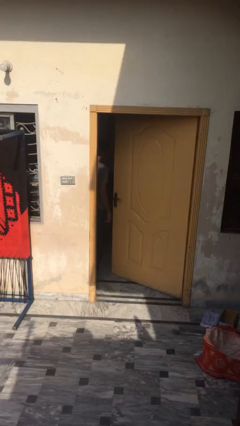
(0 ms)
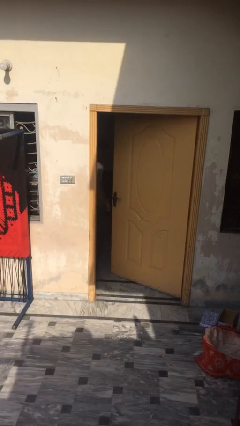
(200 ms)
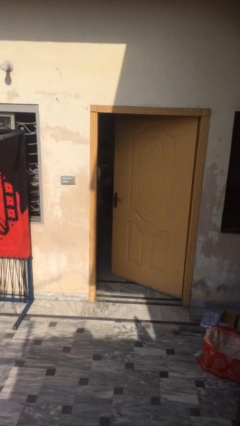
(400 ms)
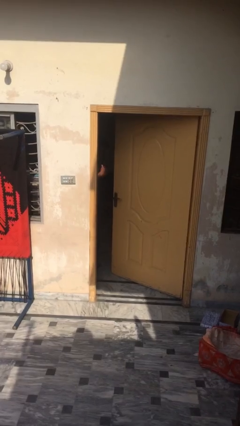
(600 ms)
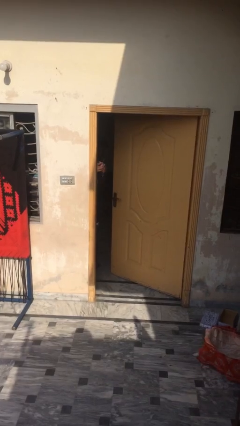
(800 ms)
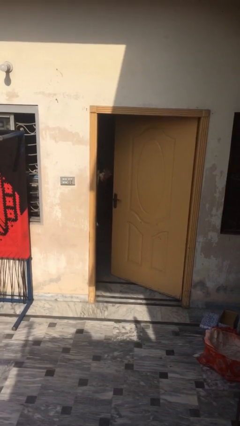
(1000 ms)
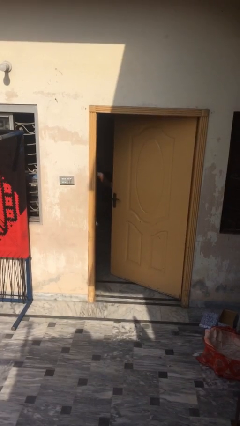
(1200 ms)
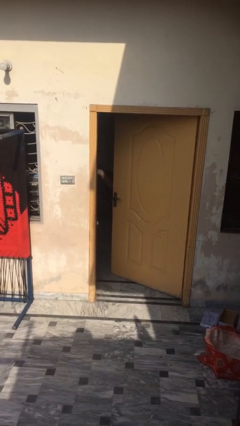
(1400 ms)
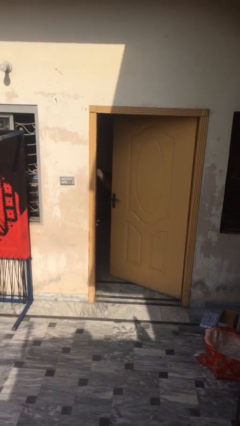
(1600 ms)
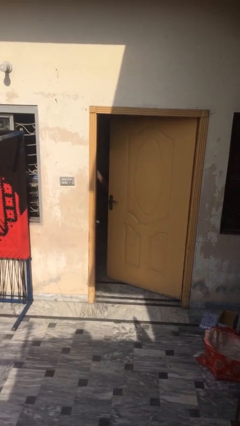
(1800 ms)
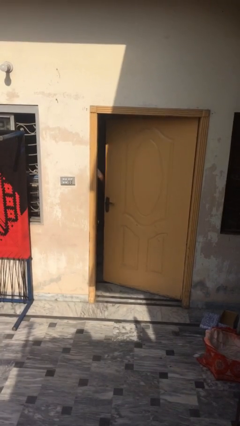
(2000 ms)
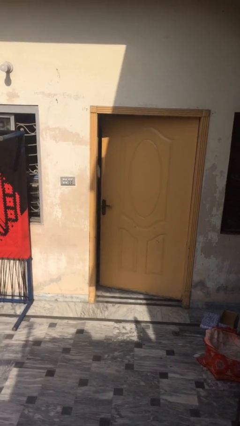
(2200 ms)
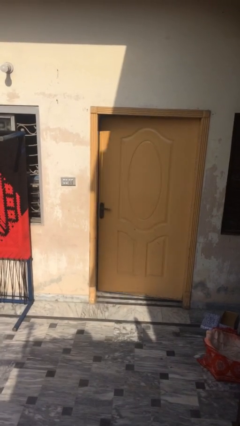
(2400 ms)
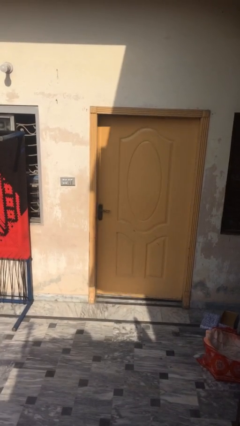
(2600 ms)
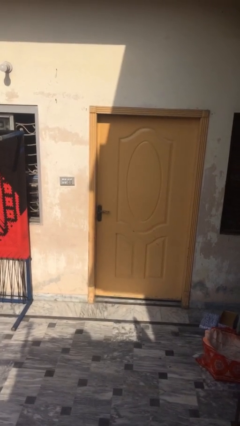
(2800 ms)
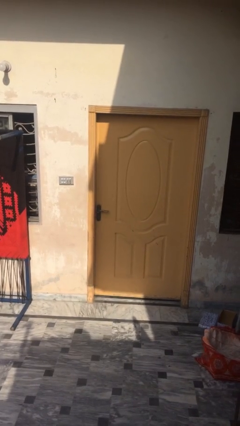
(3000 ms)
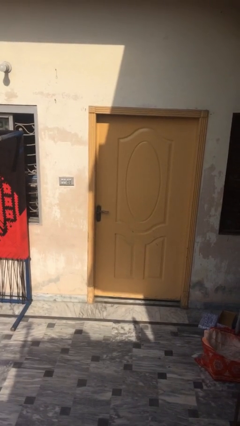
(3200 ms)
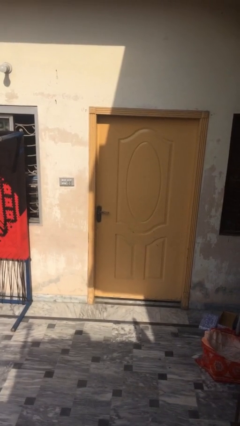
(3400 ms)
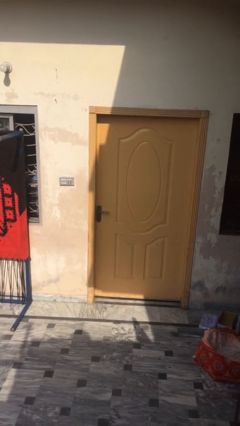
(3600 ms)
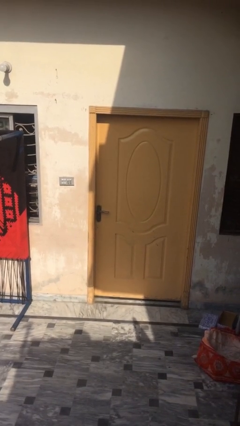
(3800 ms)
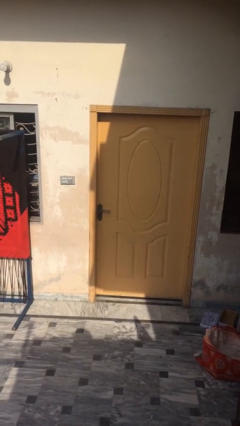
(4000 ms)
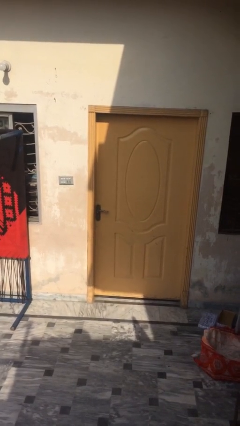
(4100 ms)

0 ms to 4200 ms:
person closes facility door

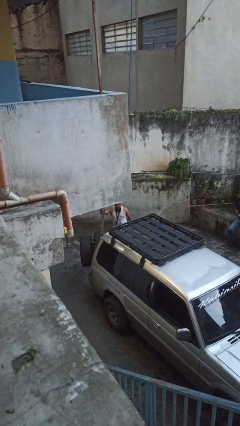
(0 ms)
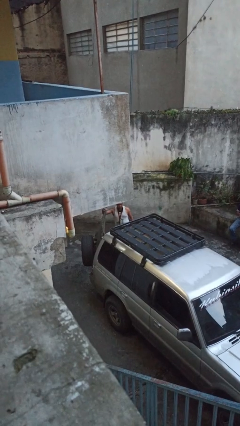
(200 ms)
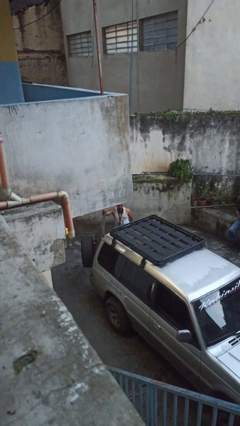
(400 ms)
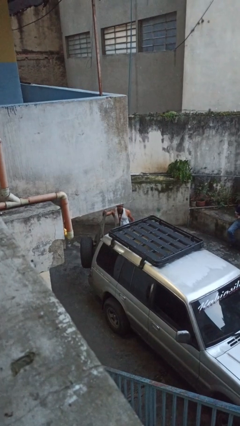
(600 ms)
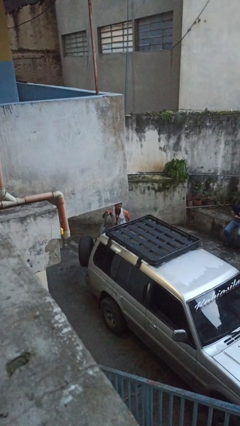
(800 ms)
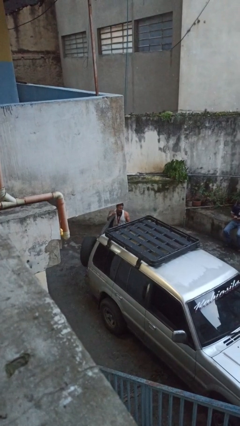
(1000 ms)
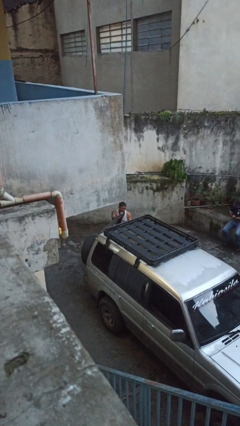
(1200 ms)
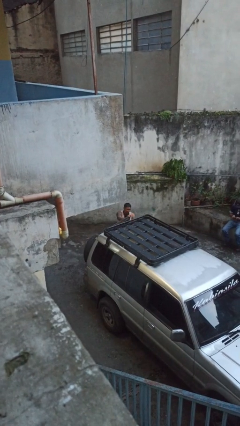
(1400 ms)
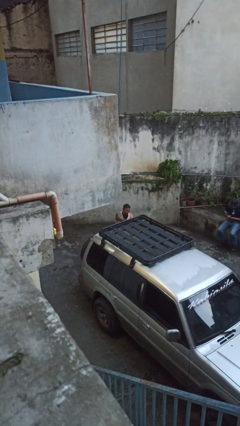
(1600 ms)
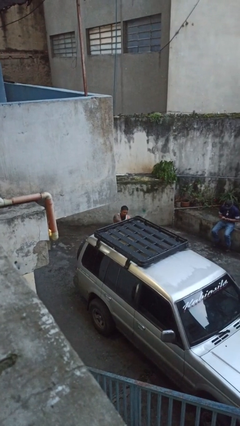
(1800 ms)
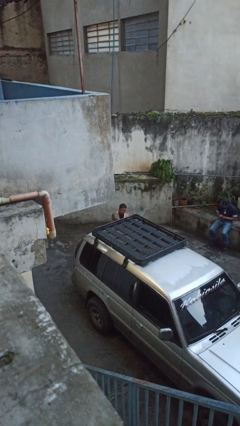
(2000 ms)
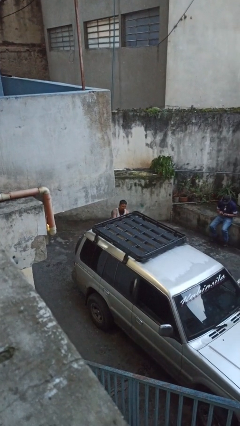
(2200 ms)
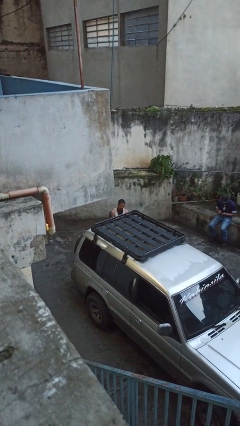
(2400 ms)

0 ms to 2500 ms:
person closes car trunk

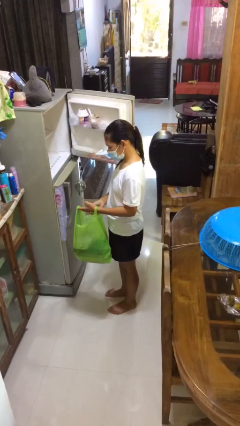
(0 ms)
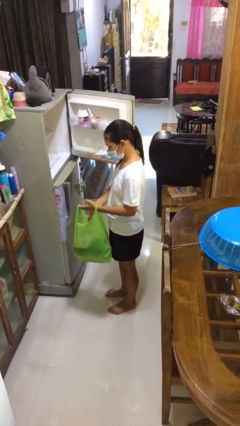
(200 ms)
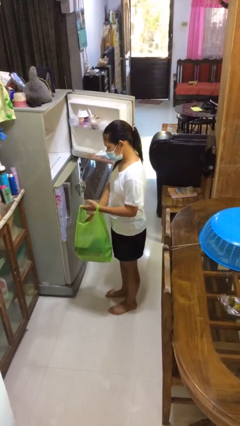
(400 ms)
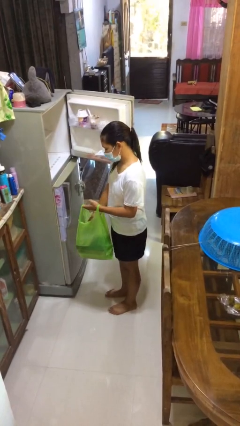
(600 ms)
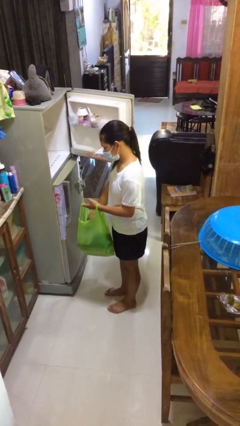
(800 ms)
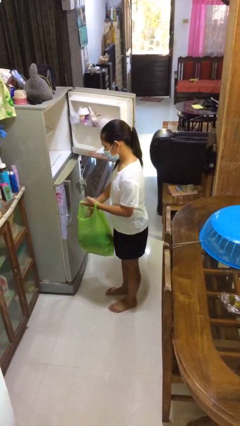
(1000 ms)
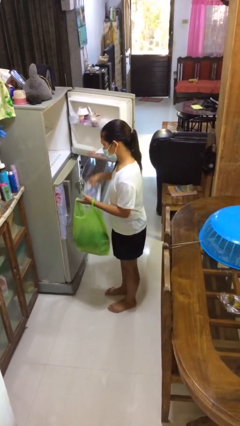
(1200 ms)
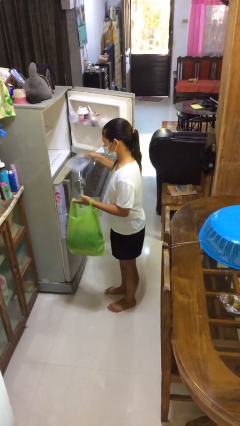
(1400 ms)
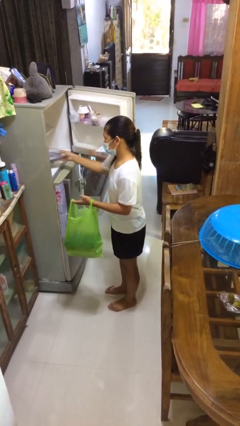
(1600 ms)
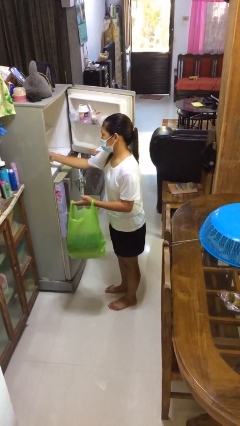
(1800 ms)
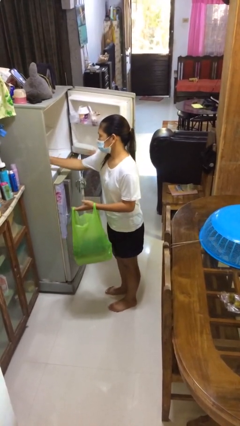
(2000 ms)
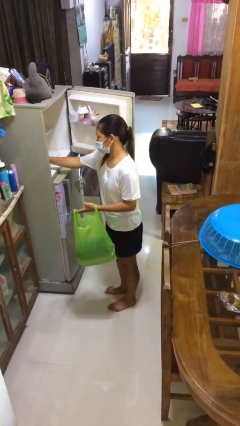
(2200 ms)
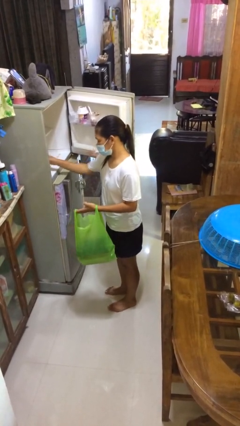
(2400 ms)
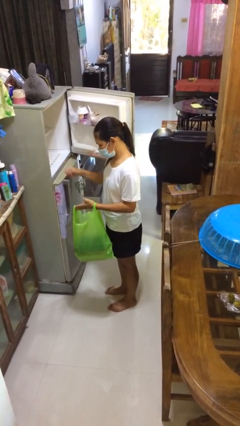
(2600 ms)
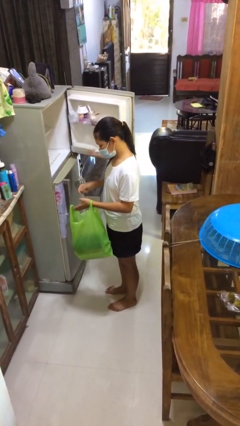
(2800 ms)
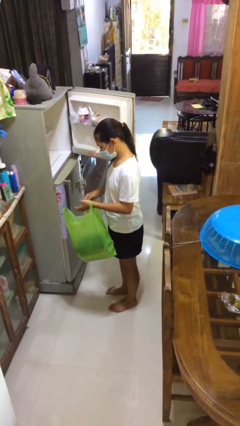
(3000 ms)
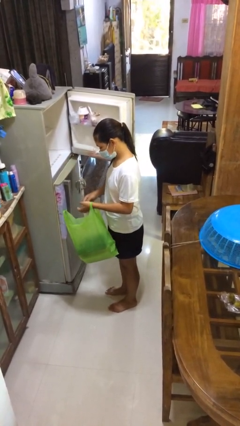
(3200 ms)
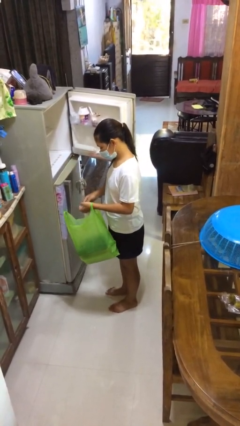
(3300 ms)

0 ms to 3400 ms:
person loads groceries into refrigerator

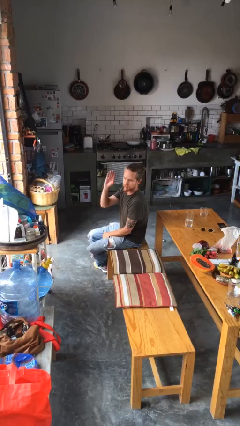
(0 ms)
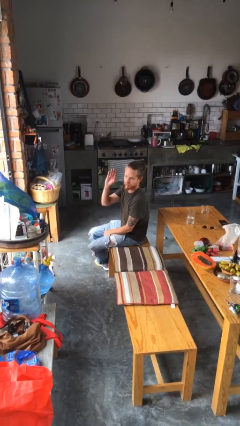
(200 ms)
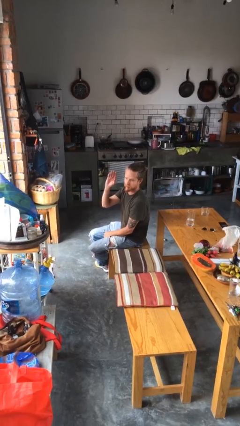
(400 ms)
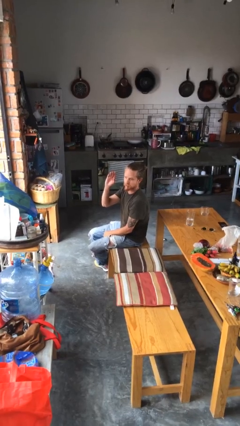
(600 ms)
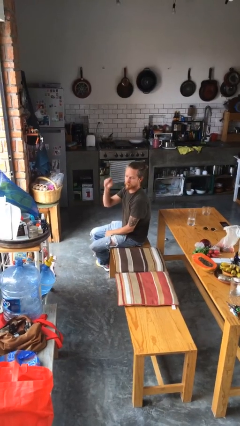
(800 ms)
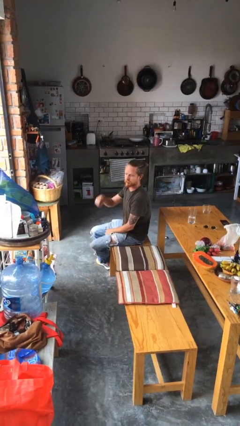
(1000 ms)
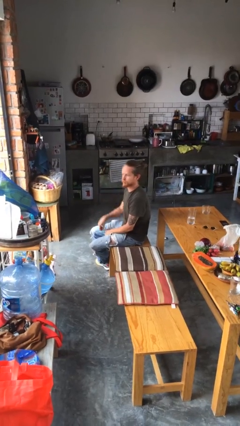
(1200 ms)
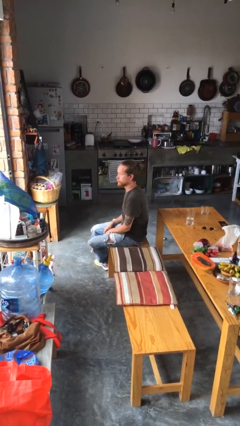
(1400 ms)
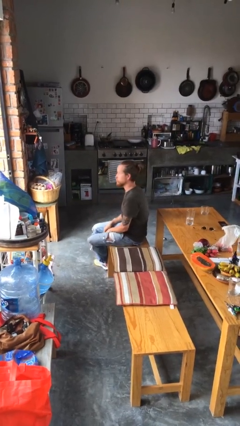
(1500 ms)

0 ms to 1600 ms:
person gestures lower hand

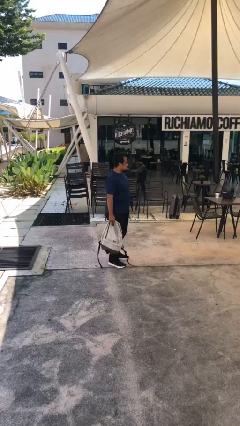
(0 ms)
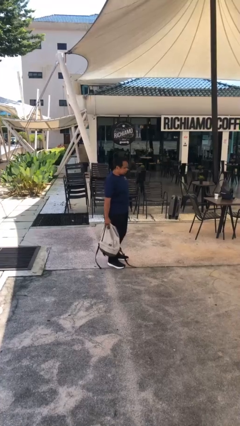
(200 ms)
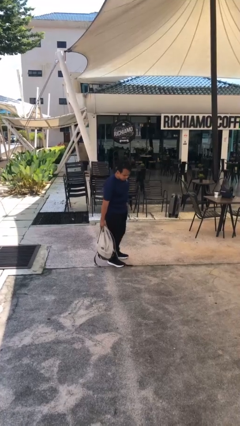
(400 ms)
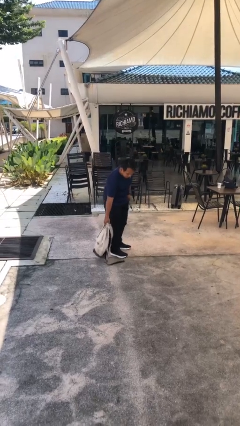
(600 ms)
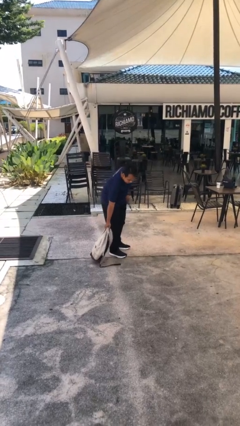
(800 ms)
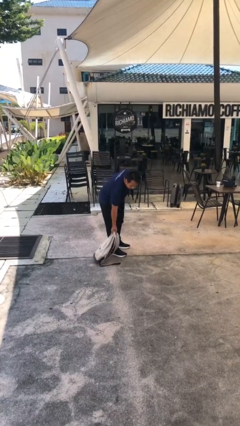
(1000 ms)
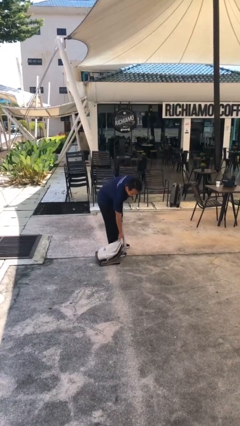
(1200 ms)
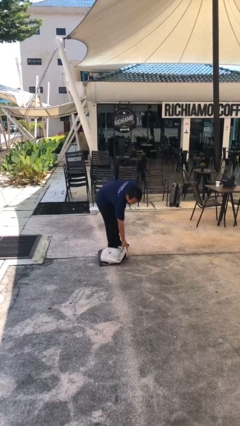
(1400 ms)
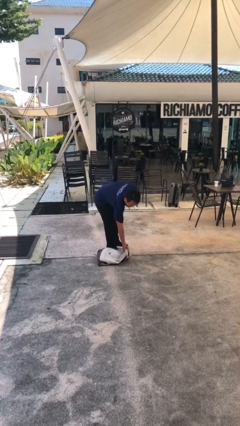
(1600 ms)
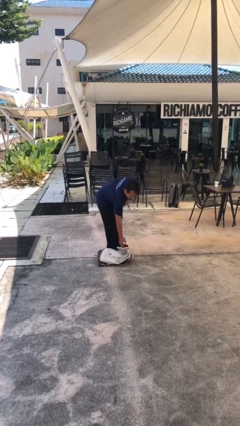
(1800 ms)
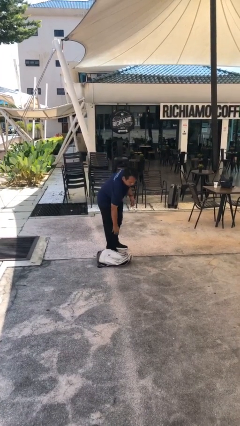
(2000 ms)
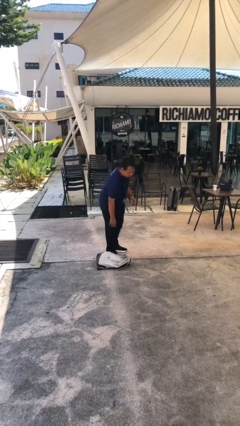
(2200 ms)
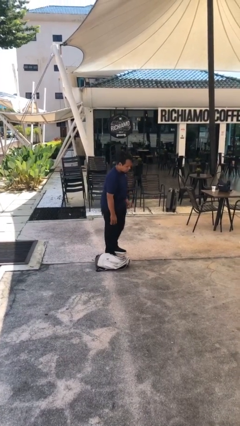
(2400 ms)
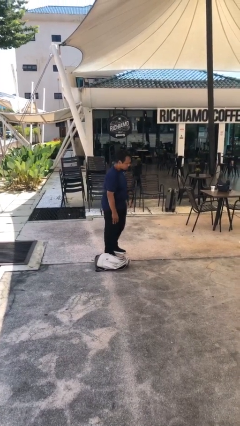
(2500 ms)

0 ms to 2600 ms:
person puts down object on floor

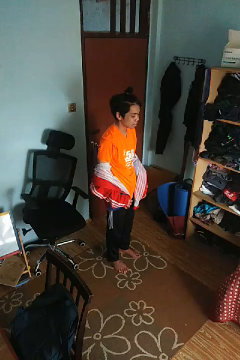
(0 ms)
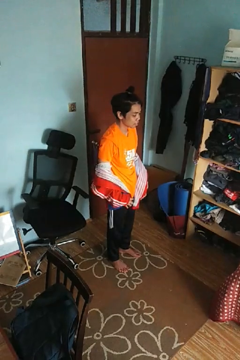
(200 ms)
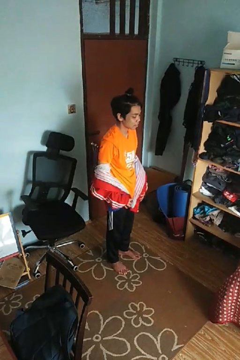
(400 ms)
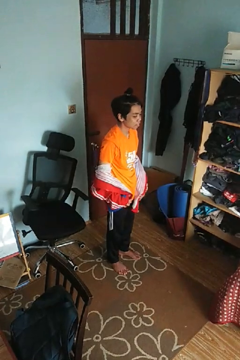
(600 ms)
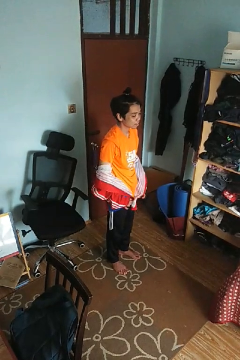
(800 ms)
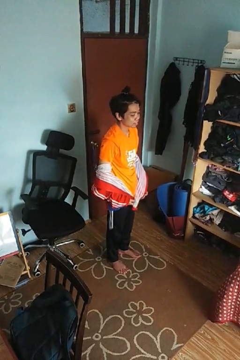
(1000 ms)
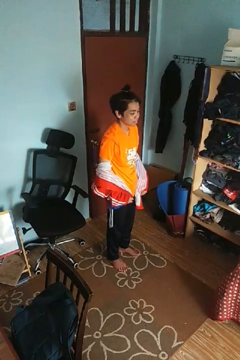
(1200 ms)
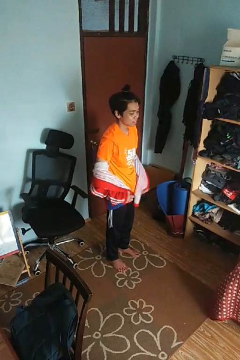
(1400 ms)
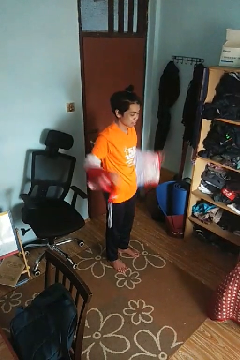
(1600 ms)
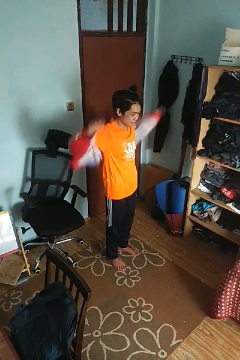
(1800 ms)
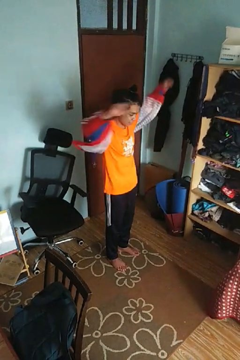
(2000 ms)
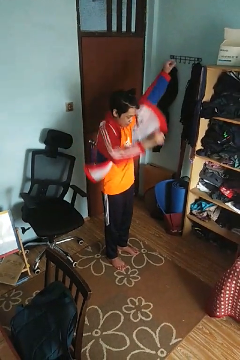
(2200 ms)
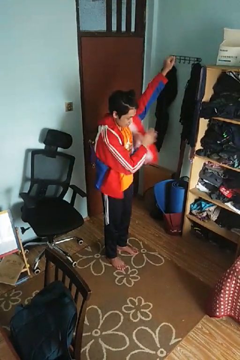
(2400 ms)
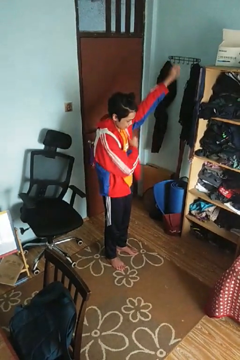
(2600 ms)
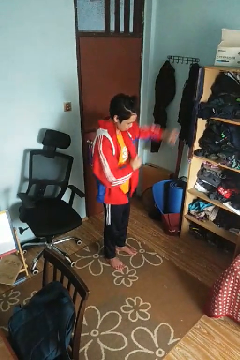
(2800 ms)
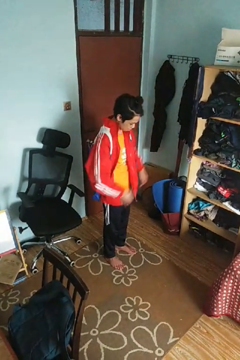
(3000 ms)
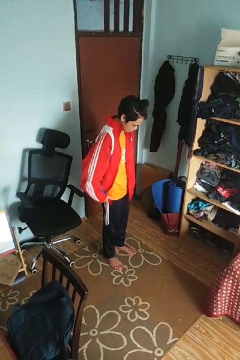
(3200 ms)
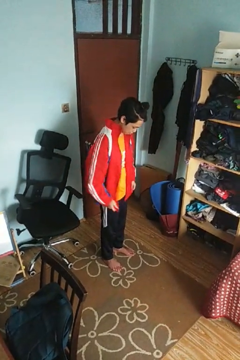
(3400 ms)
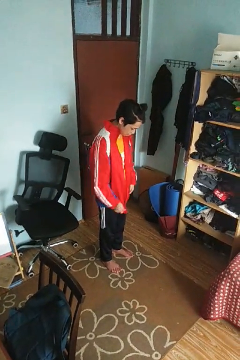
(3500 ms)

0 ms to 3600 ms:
person puts on jacket

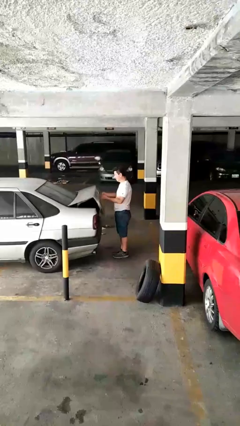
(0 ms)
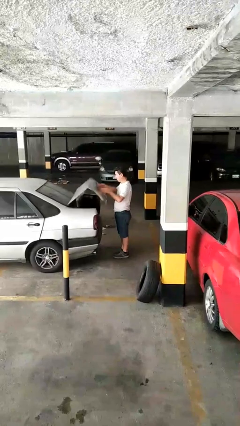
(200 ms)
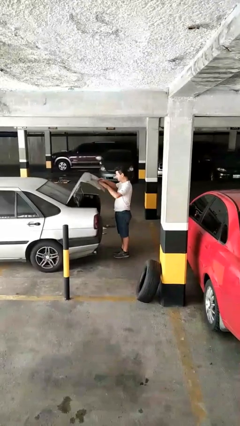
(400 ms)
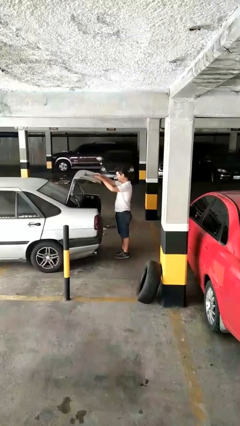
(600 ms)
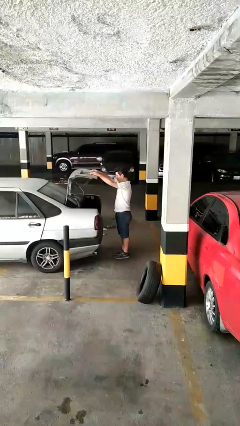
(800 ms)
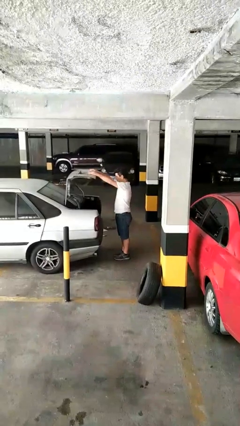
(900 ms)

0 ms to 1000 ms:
person opens car trunk
